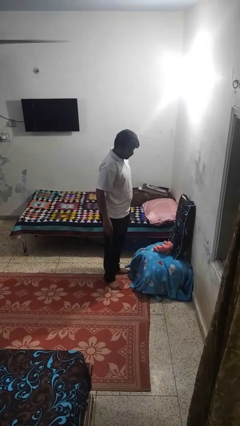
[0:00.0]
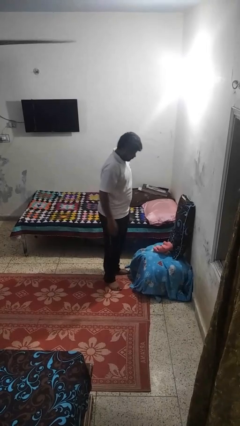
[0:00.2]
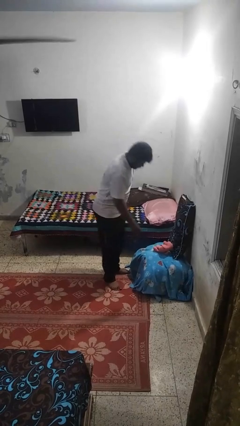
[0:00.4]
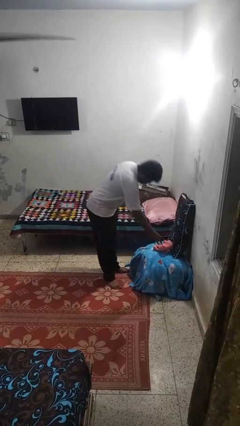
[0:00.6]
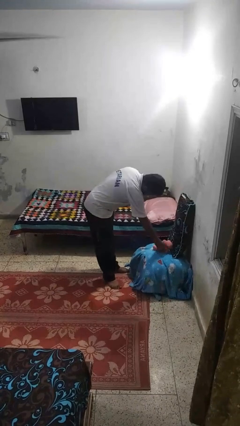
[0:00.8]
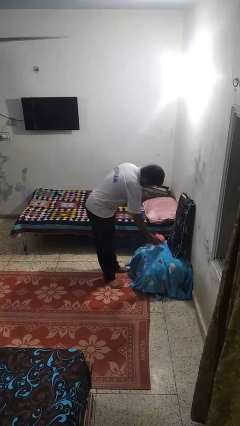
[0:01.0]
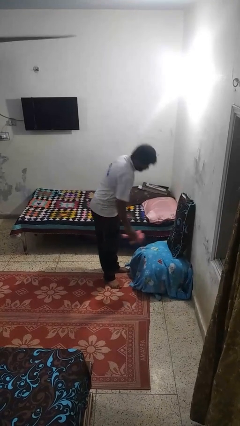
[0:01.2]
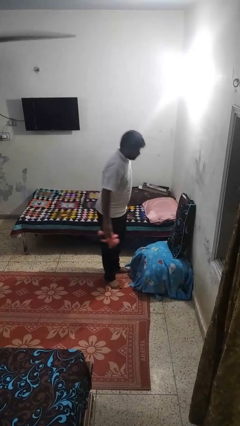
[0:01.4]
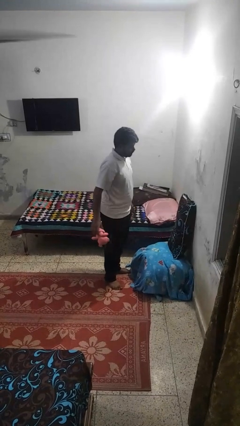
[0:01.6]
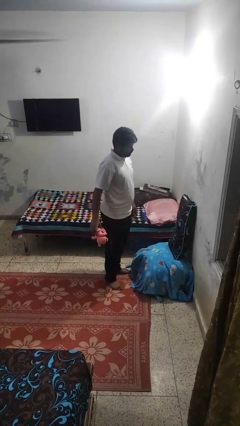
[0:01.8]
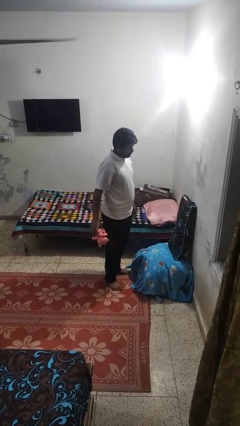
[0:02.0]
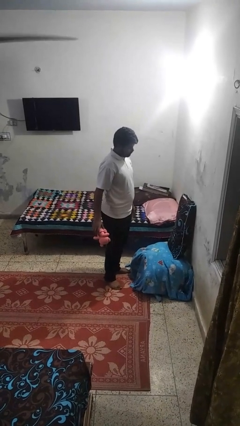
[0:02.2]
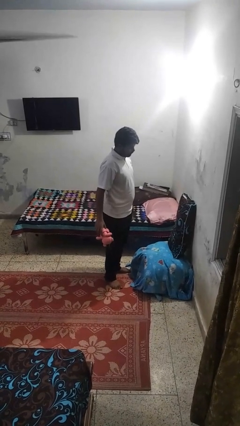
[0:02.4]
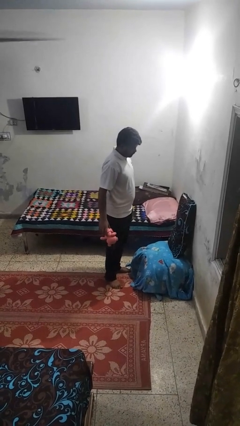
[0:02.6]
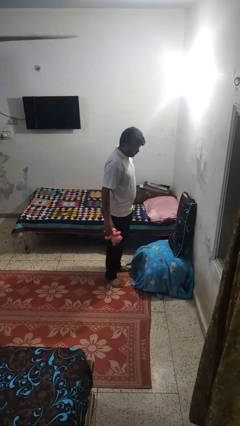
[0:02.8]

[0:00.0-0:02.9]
person picks up object from couch

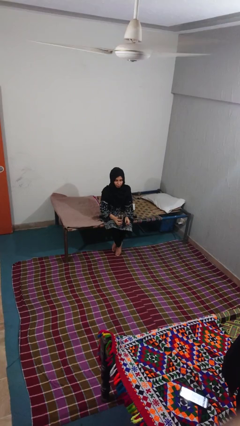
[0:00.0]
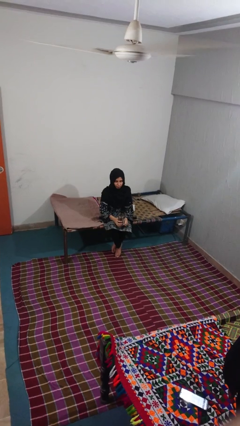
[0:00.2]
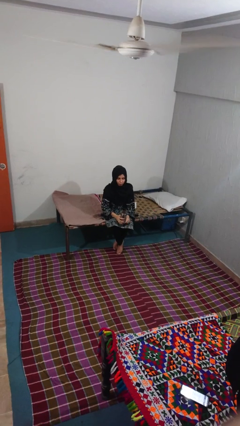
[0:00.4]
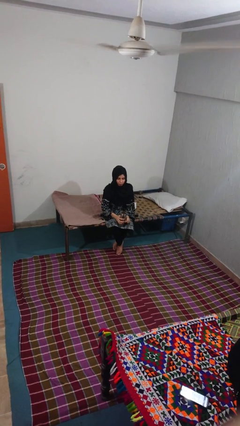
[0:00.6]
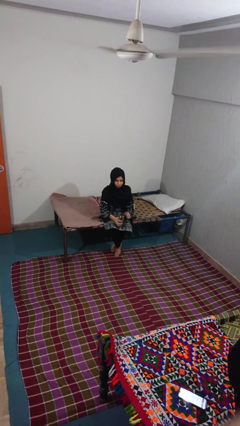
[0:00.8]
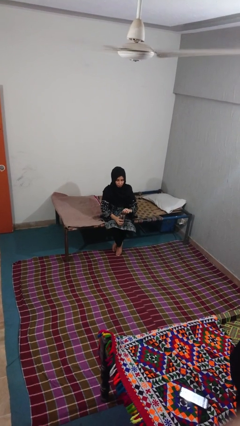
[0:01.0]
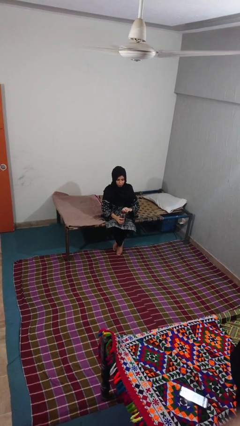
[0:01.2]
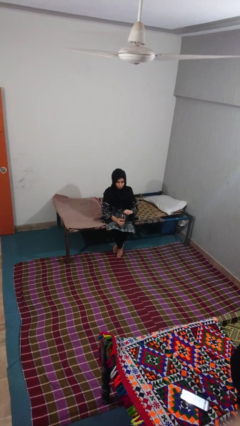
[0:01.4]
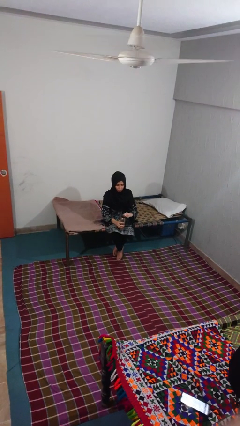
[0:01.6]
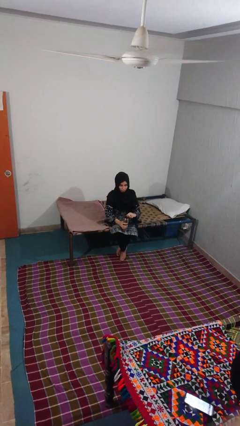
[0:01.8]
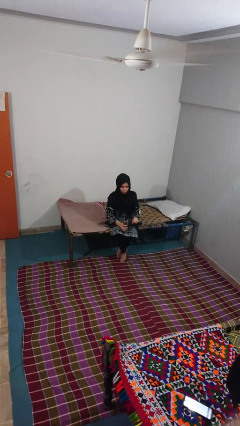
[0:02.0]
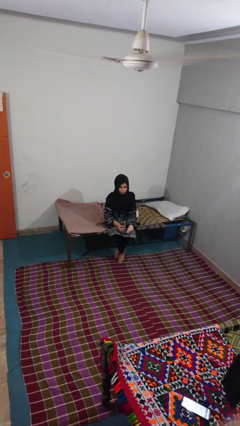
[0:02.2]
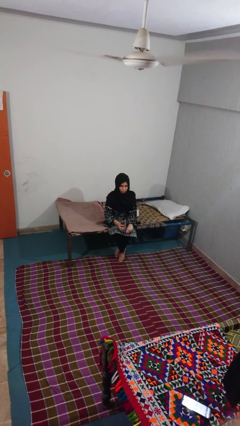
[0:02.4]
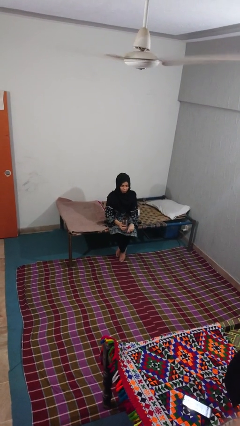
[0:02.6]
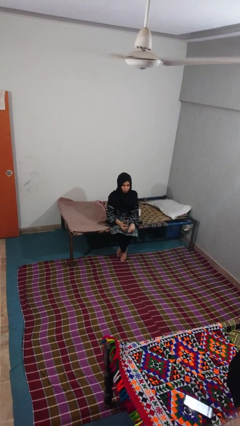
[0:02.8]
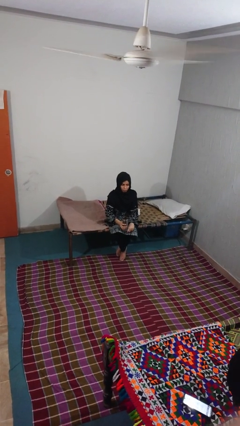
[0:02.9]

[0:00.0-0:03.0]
person opens beverage can

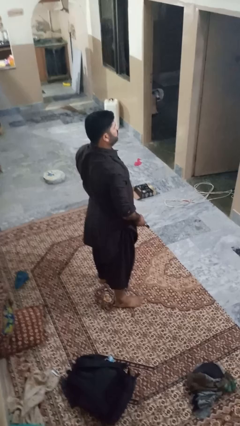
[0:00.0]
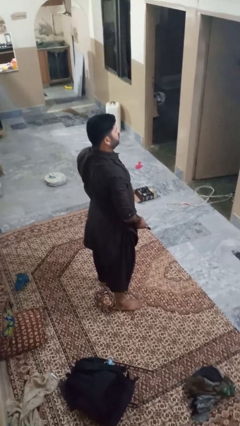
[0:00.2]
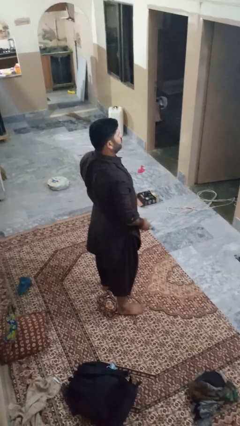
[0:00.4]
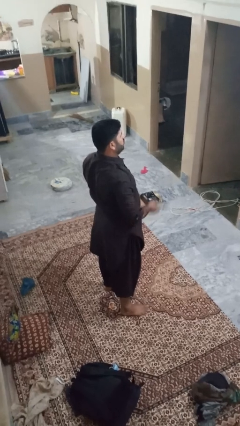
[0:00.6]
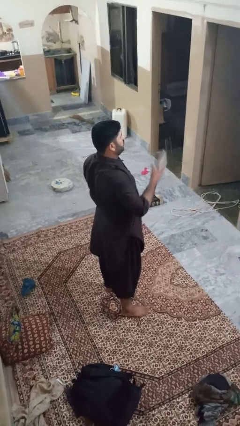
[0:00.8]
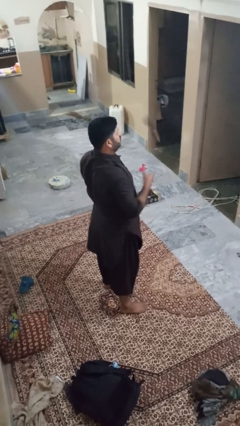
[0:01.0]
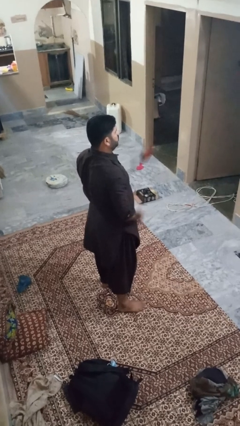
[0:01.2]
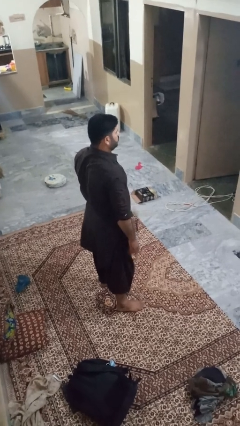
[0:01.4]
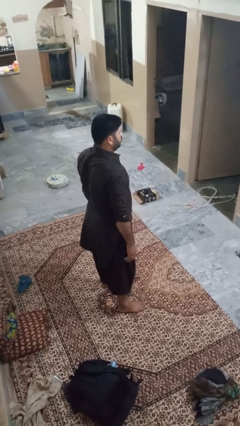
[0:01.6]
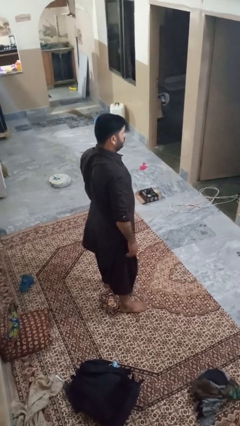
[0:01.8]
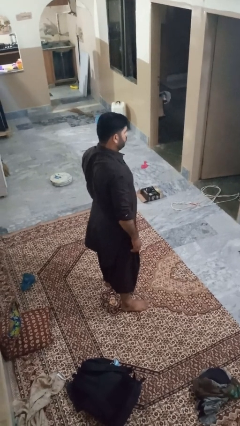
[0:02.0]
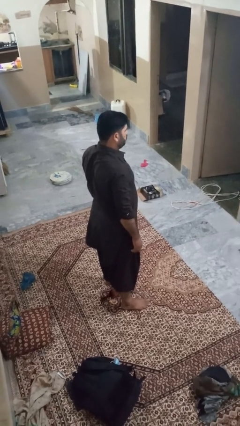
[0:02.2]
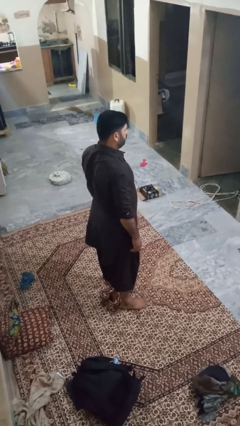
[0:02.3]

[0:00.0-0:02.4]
person throws object into air

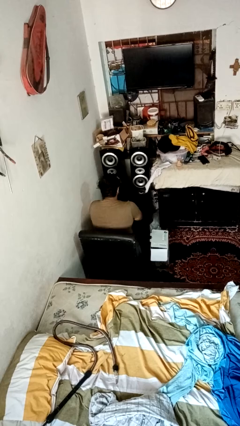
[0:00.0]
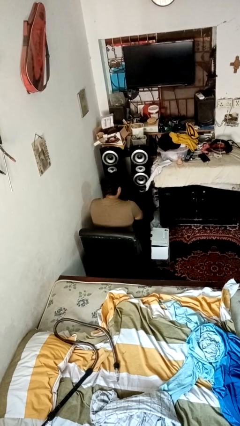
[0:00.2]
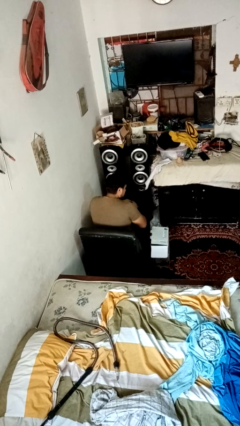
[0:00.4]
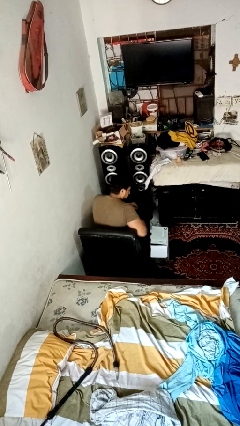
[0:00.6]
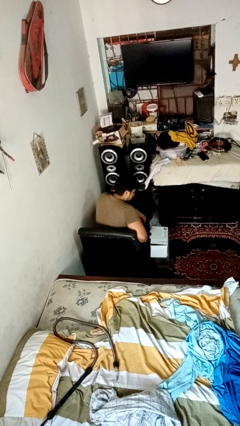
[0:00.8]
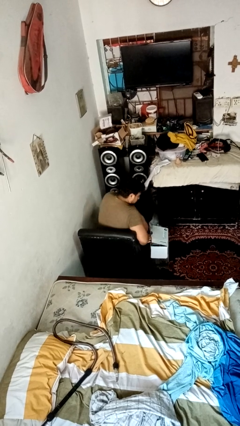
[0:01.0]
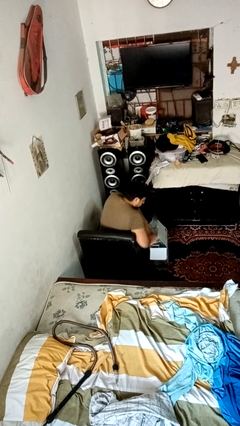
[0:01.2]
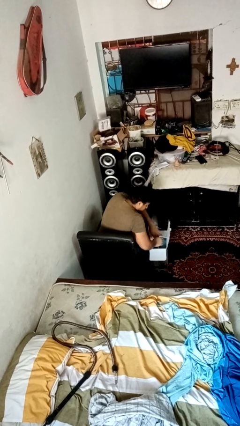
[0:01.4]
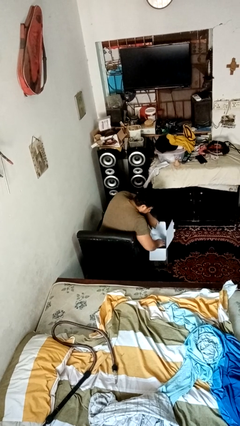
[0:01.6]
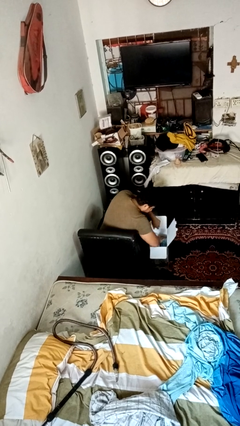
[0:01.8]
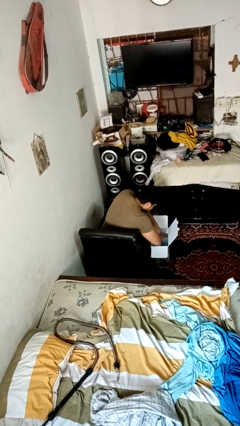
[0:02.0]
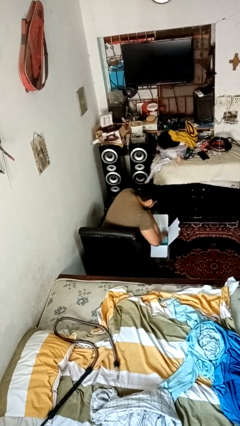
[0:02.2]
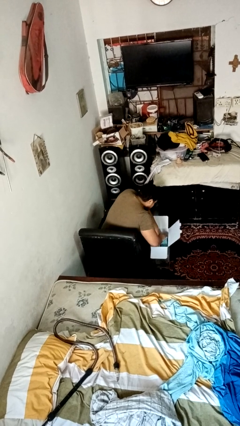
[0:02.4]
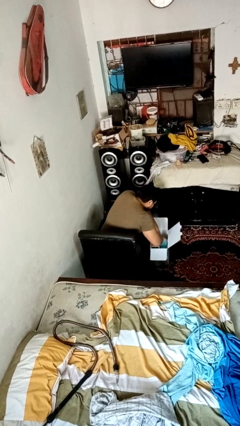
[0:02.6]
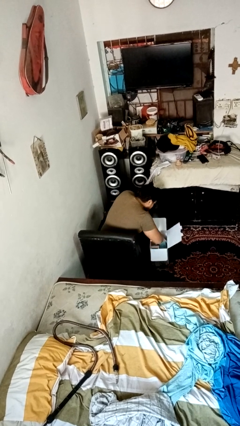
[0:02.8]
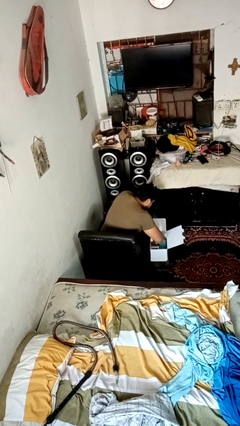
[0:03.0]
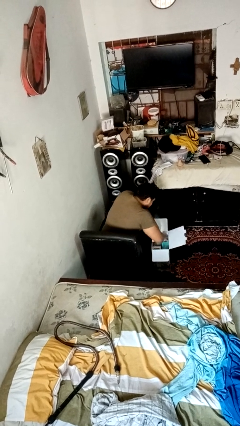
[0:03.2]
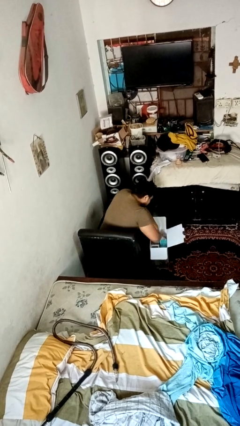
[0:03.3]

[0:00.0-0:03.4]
person searches in box

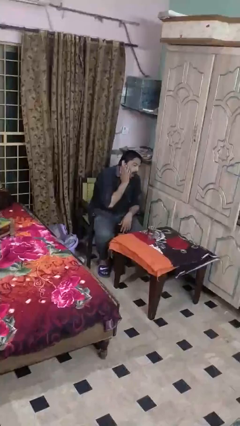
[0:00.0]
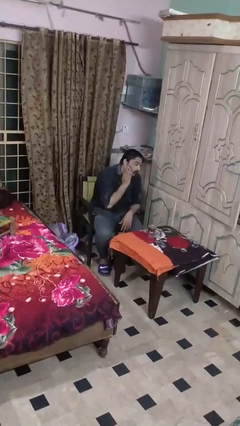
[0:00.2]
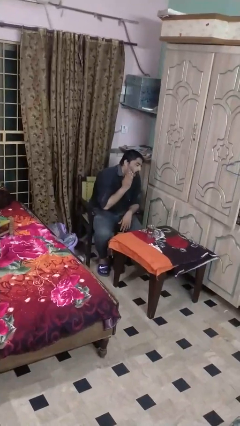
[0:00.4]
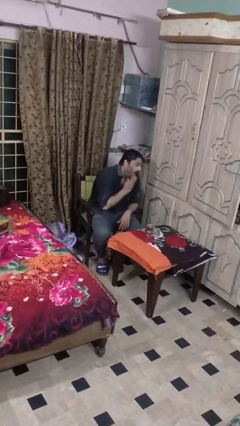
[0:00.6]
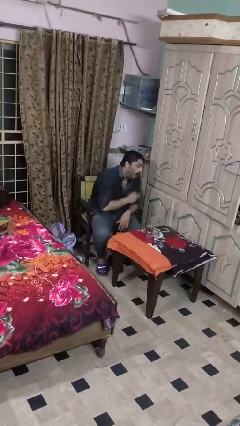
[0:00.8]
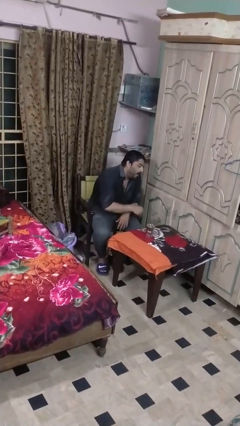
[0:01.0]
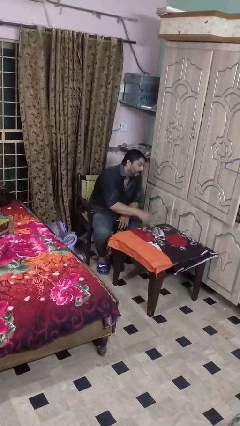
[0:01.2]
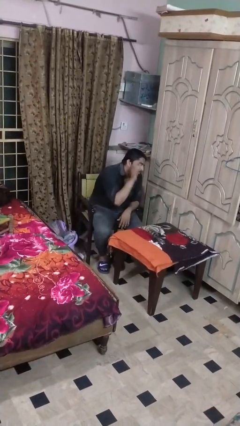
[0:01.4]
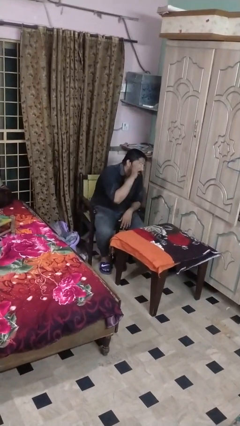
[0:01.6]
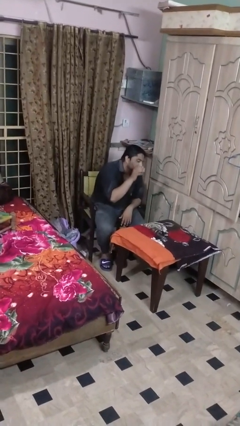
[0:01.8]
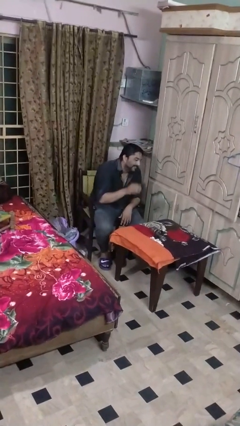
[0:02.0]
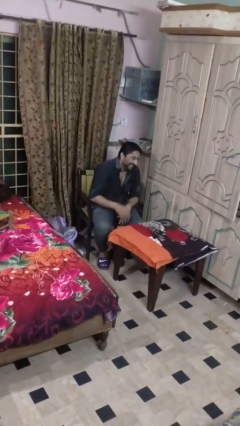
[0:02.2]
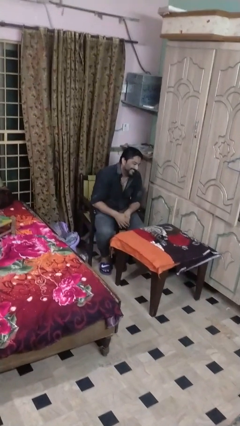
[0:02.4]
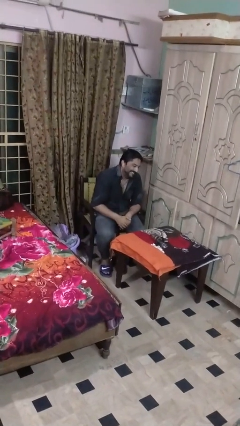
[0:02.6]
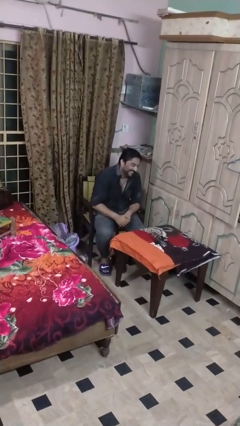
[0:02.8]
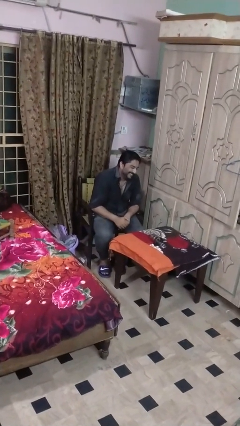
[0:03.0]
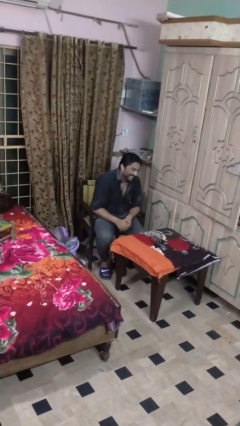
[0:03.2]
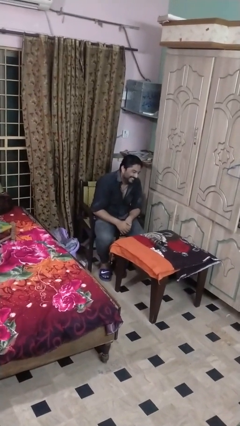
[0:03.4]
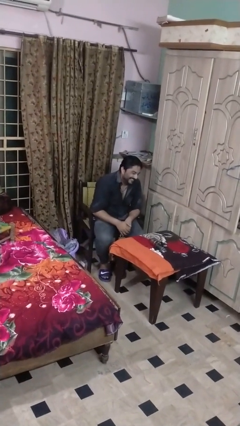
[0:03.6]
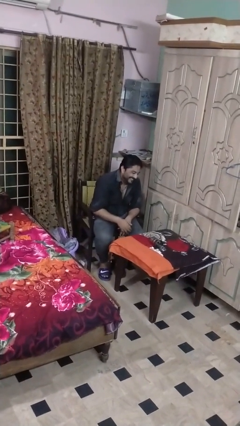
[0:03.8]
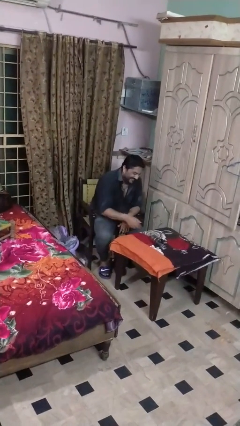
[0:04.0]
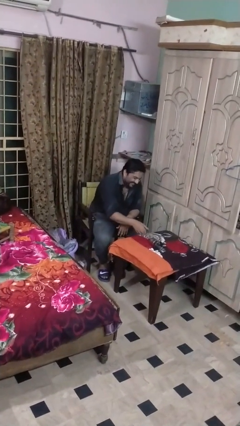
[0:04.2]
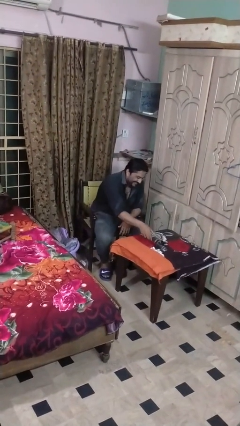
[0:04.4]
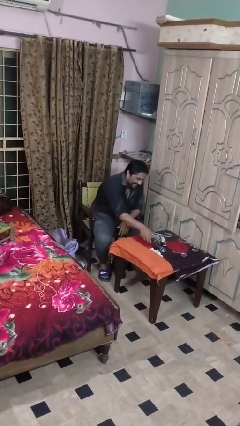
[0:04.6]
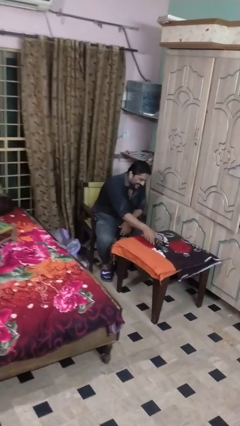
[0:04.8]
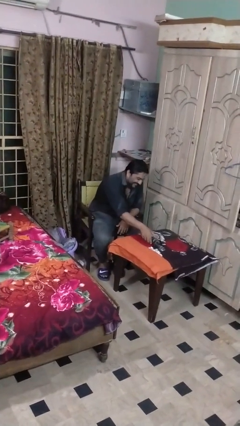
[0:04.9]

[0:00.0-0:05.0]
person knocks over glass

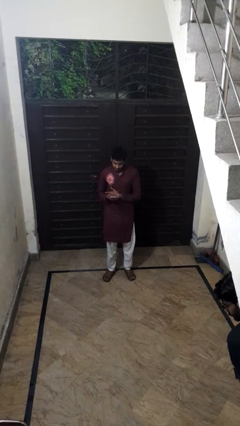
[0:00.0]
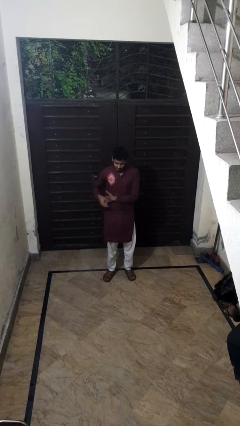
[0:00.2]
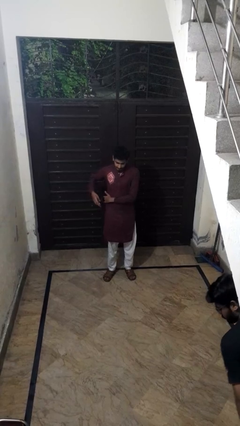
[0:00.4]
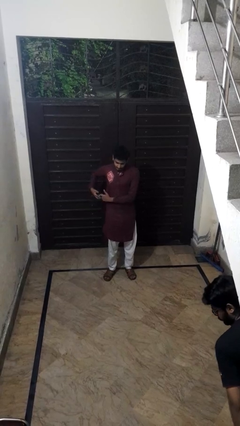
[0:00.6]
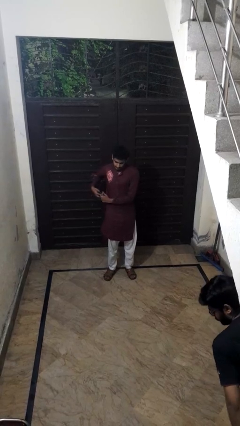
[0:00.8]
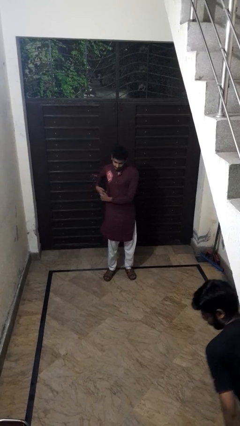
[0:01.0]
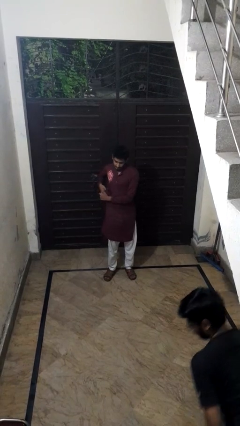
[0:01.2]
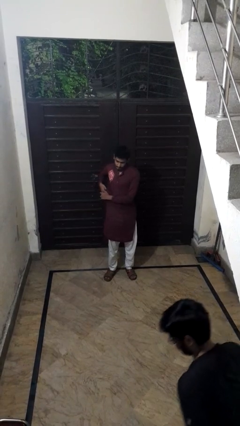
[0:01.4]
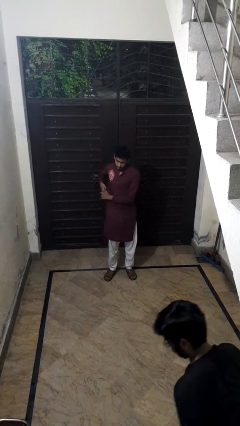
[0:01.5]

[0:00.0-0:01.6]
person puts phone into pocket
